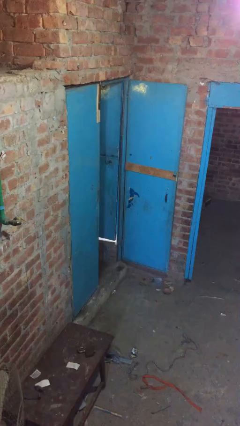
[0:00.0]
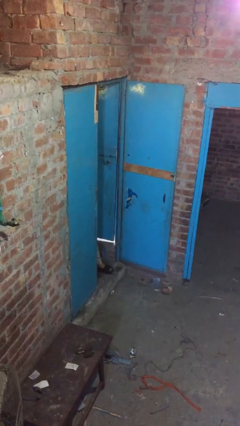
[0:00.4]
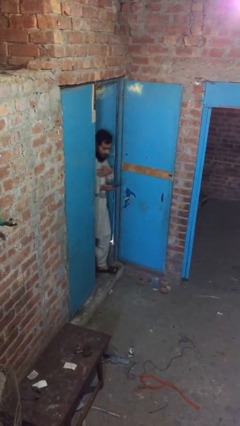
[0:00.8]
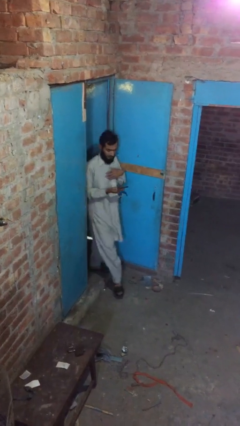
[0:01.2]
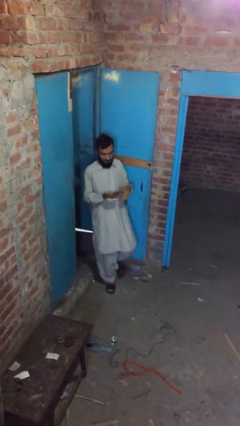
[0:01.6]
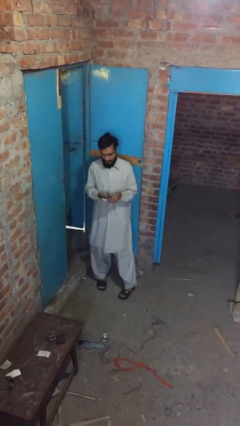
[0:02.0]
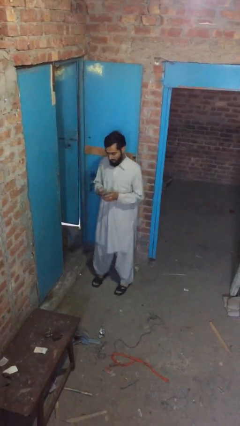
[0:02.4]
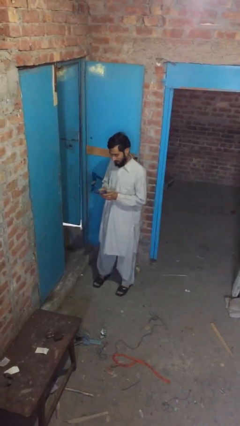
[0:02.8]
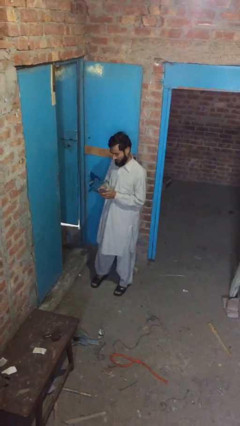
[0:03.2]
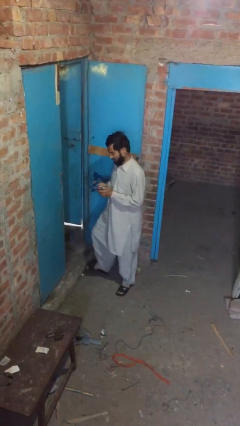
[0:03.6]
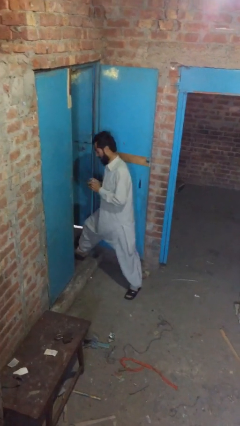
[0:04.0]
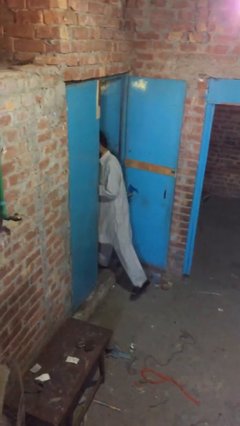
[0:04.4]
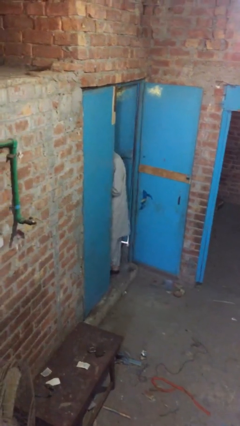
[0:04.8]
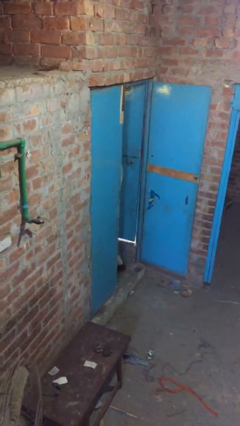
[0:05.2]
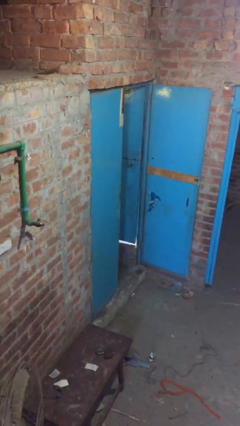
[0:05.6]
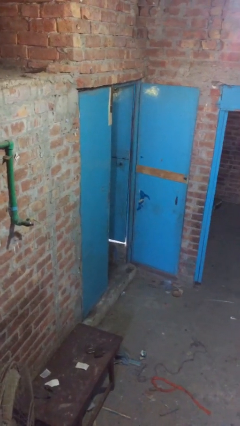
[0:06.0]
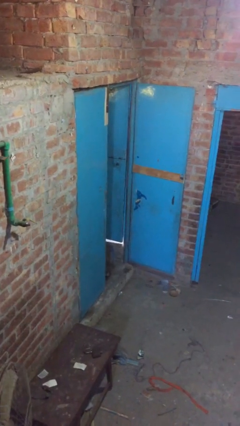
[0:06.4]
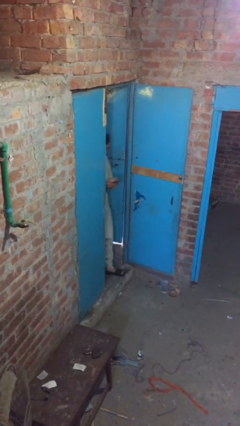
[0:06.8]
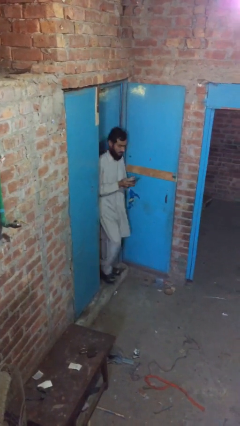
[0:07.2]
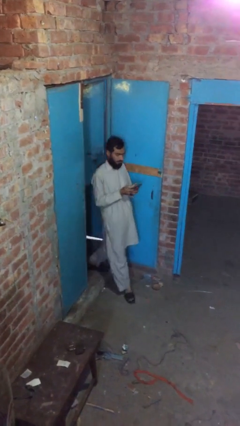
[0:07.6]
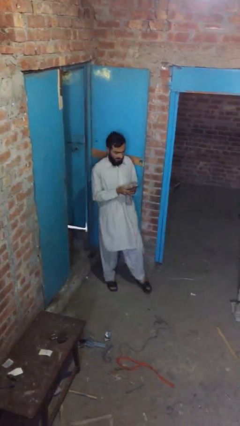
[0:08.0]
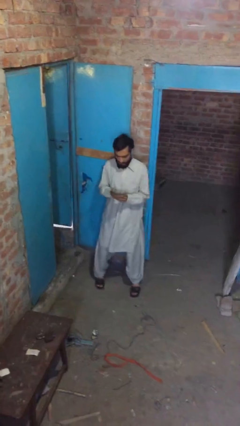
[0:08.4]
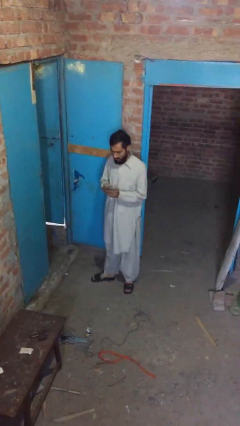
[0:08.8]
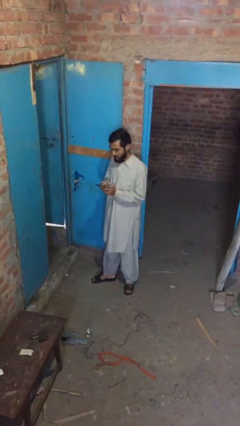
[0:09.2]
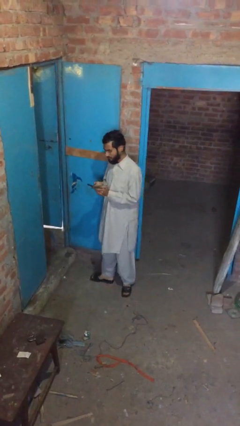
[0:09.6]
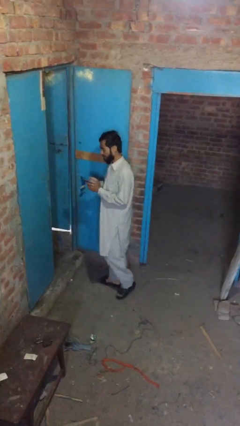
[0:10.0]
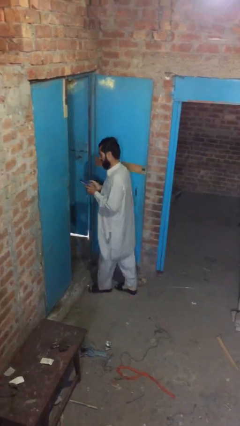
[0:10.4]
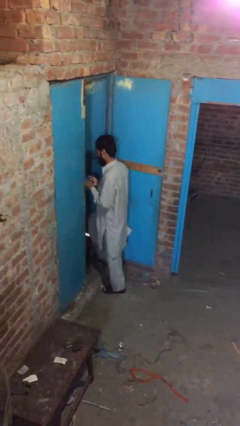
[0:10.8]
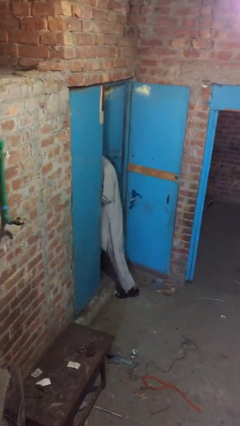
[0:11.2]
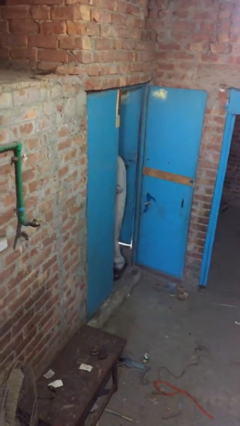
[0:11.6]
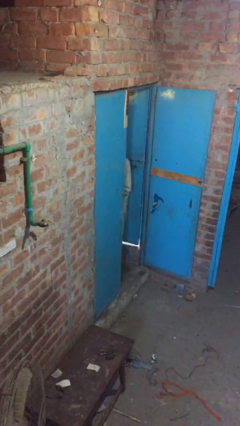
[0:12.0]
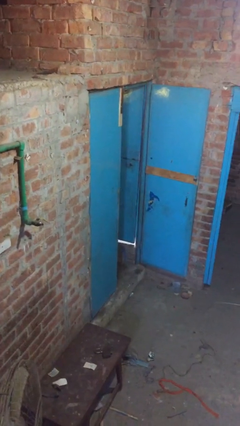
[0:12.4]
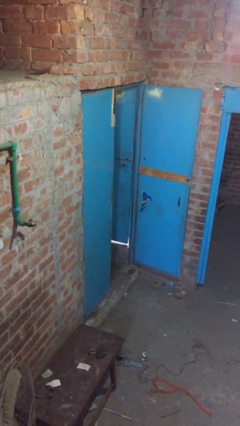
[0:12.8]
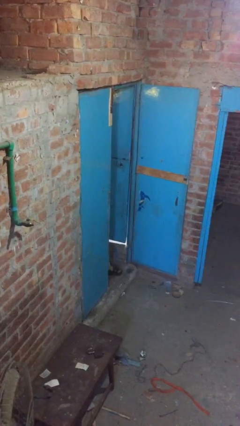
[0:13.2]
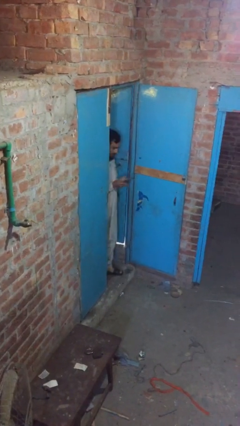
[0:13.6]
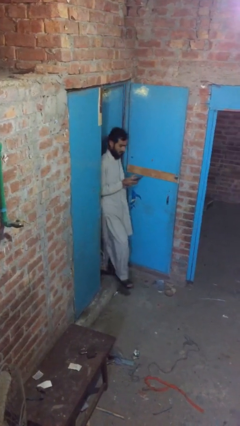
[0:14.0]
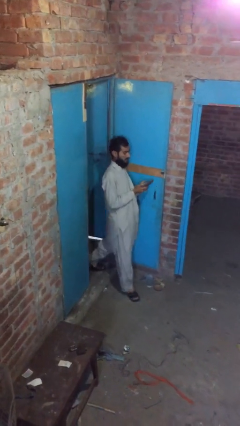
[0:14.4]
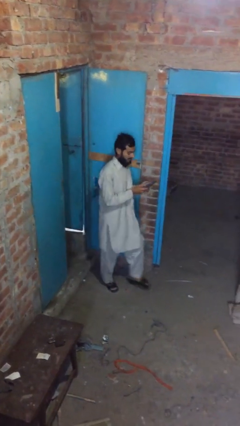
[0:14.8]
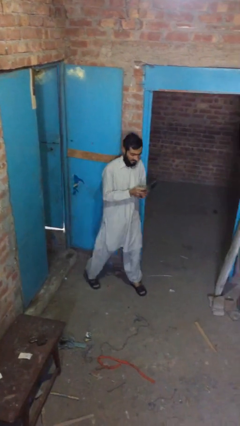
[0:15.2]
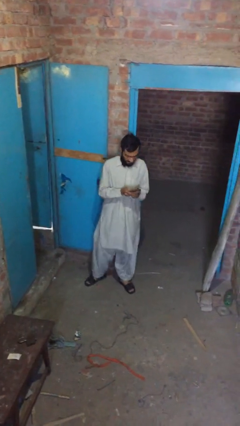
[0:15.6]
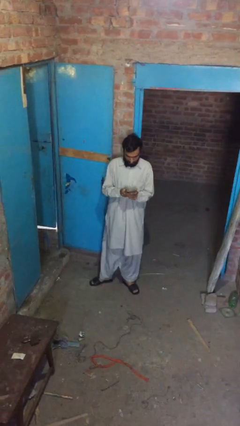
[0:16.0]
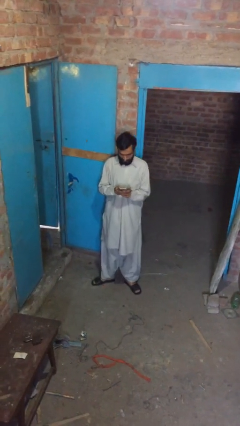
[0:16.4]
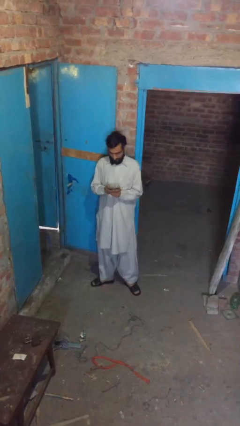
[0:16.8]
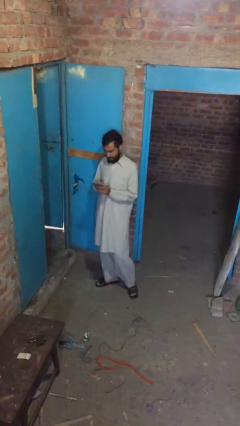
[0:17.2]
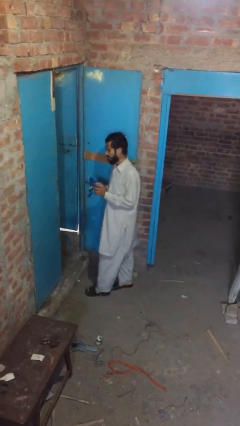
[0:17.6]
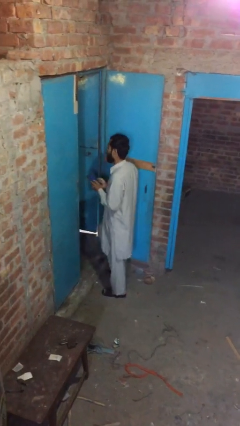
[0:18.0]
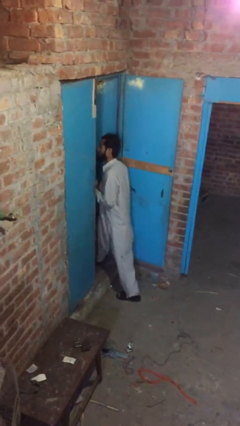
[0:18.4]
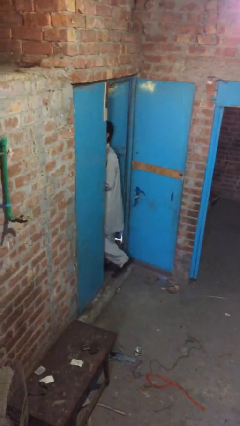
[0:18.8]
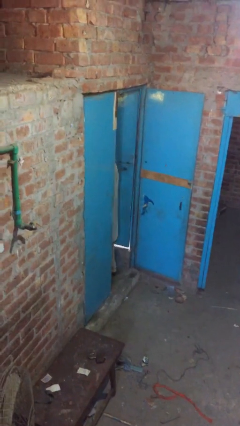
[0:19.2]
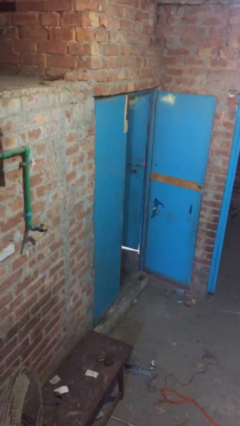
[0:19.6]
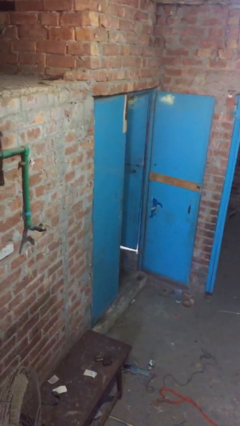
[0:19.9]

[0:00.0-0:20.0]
person texts on phone

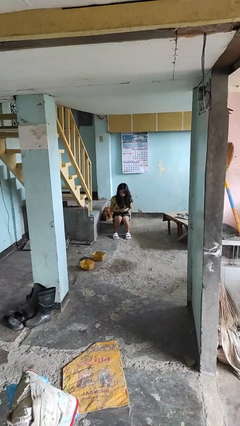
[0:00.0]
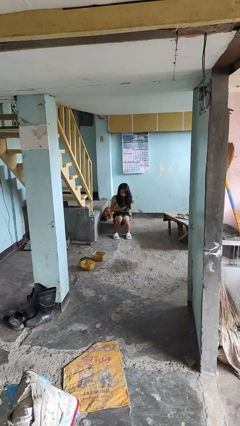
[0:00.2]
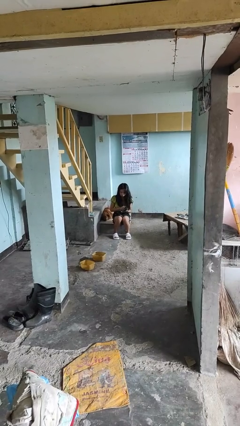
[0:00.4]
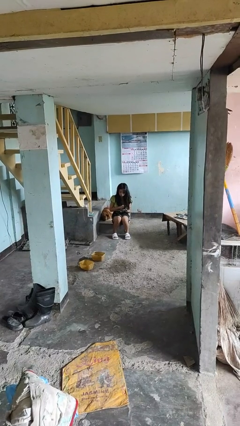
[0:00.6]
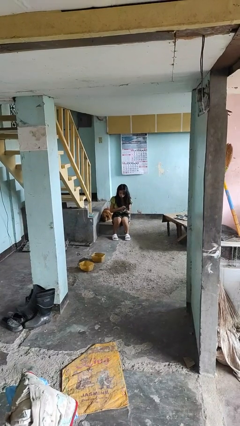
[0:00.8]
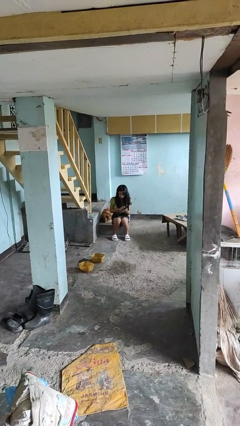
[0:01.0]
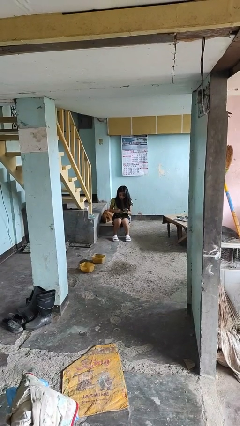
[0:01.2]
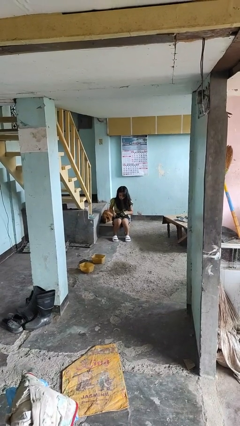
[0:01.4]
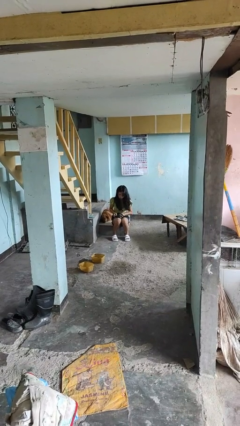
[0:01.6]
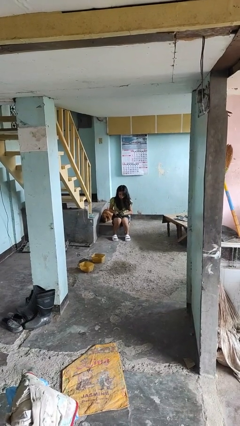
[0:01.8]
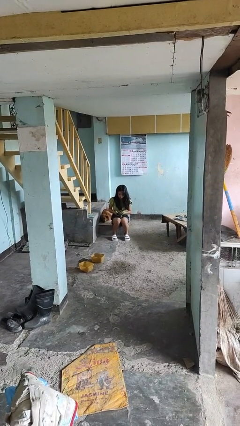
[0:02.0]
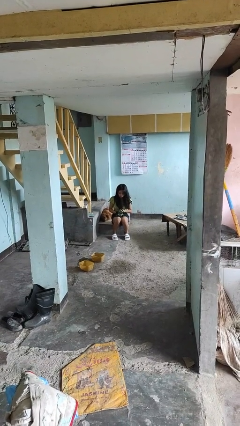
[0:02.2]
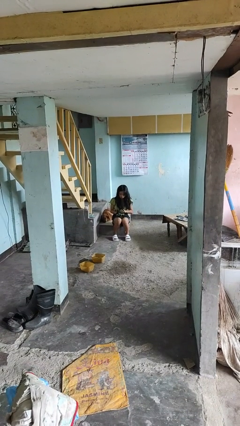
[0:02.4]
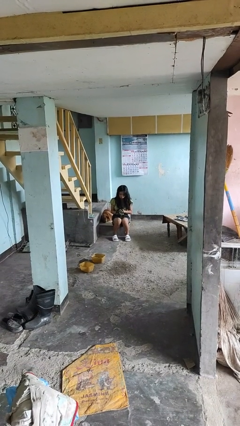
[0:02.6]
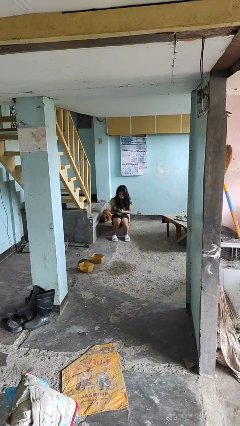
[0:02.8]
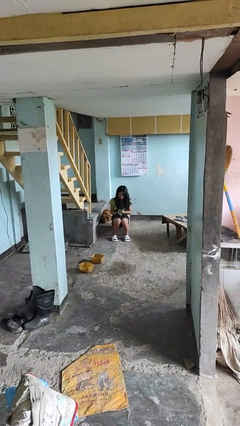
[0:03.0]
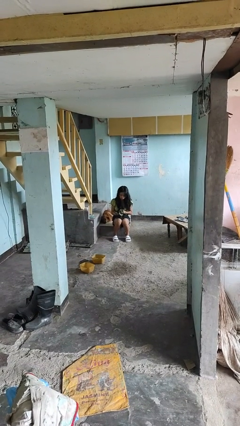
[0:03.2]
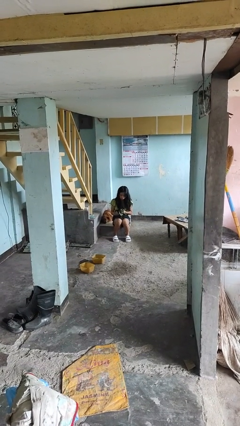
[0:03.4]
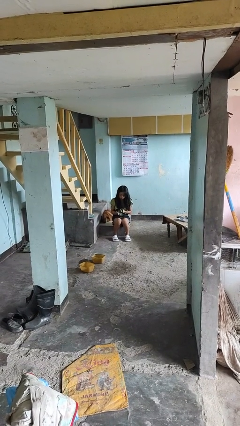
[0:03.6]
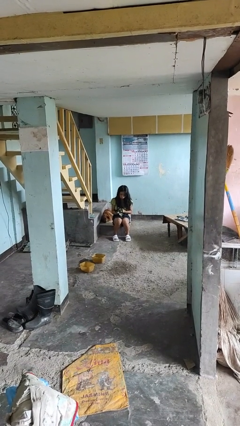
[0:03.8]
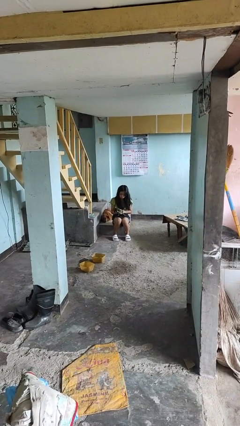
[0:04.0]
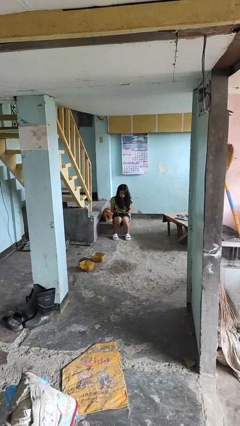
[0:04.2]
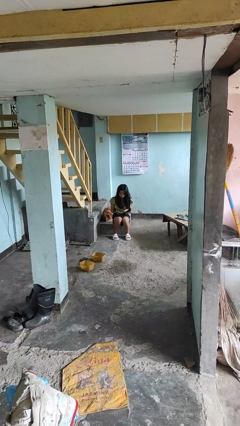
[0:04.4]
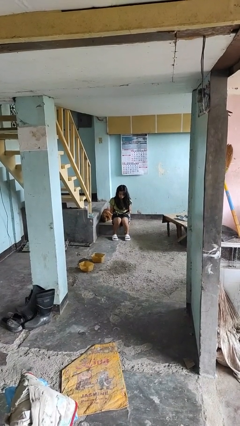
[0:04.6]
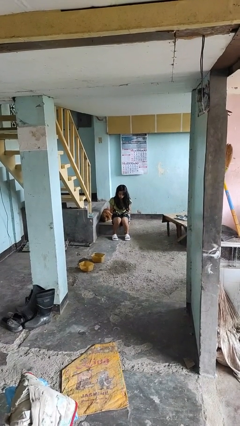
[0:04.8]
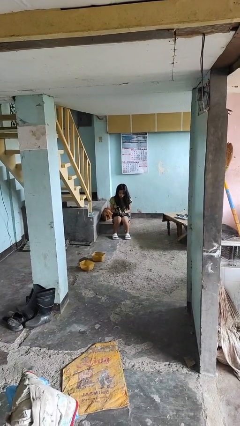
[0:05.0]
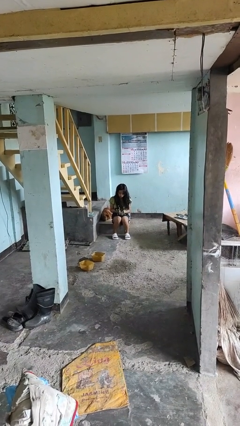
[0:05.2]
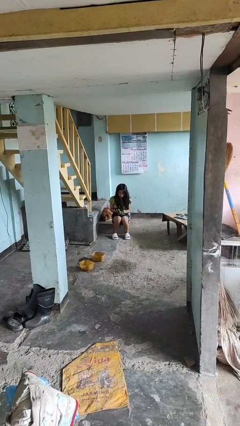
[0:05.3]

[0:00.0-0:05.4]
person puts on gloves

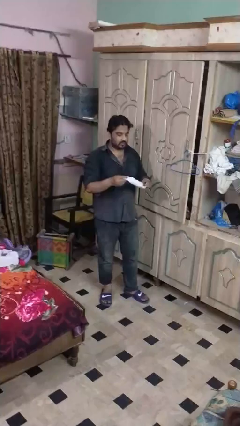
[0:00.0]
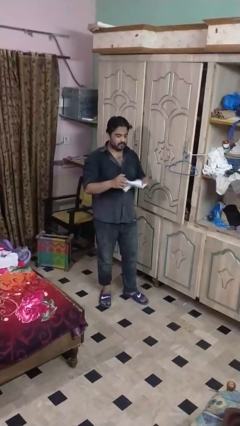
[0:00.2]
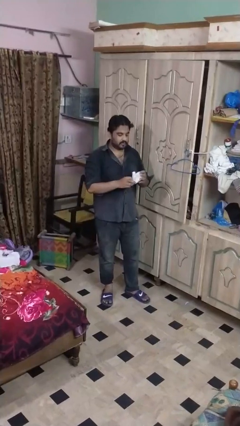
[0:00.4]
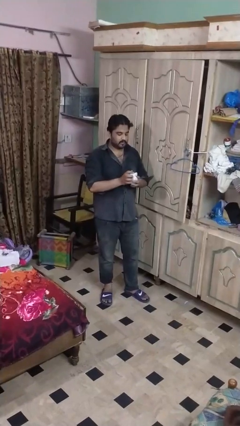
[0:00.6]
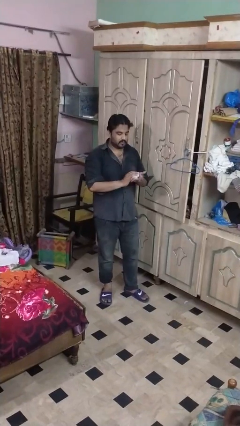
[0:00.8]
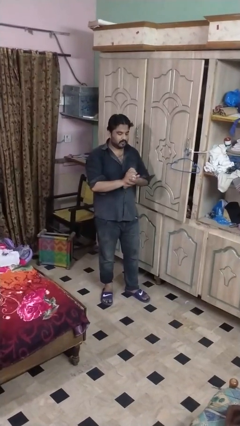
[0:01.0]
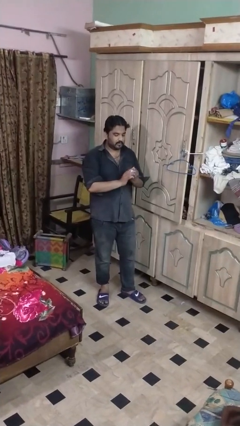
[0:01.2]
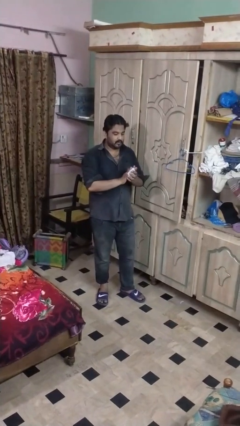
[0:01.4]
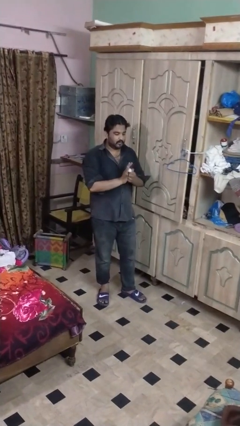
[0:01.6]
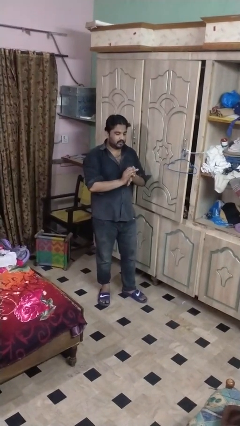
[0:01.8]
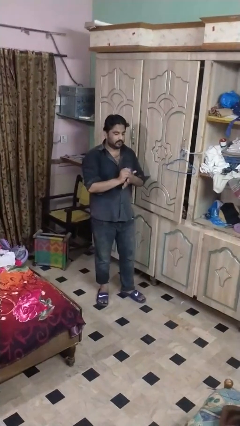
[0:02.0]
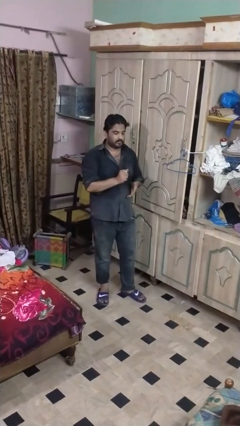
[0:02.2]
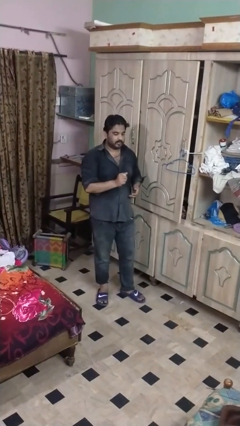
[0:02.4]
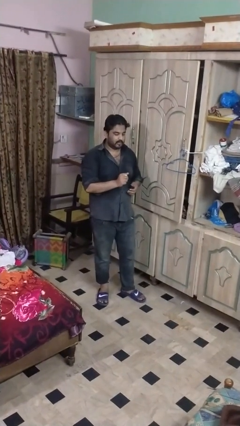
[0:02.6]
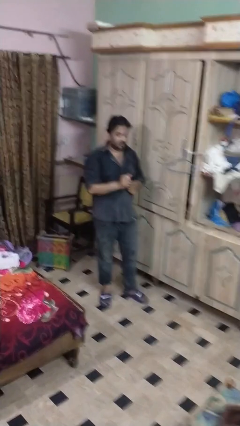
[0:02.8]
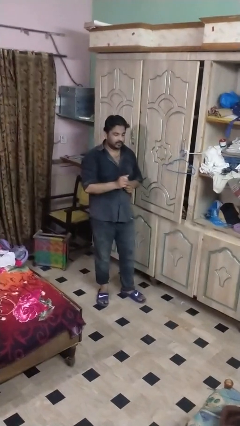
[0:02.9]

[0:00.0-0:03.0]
person crumples paper
